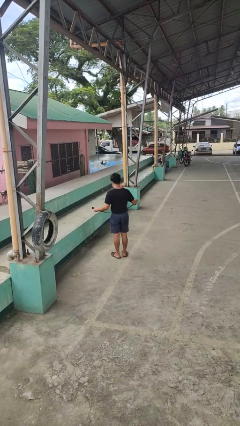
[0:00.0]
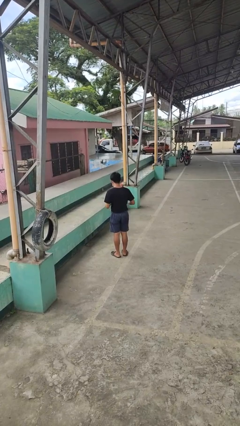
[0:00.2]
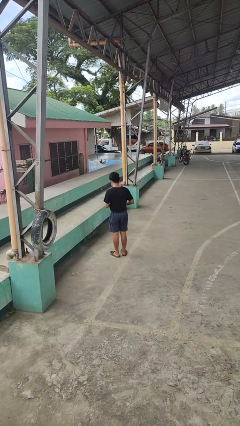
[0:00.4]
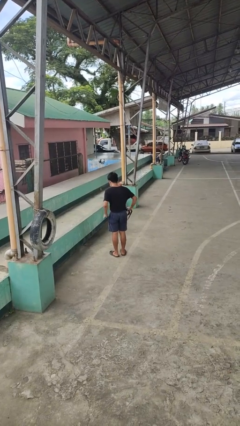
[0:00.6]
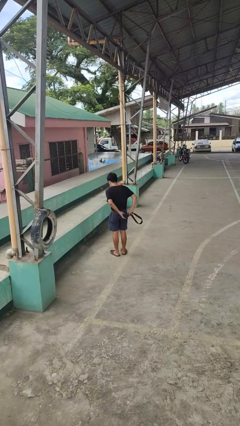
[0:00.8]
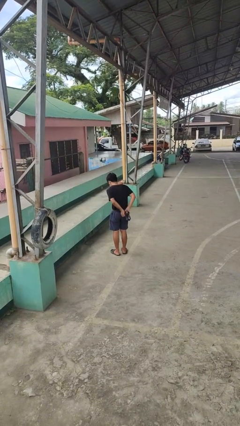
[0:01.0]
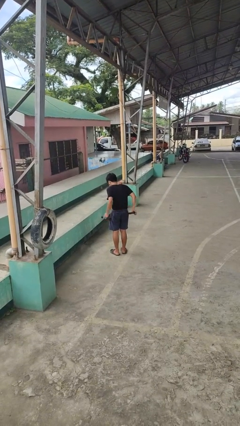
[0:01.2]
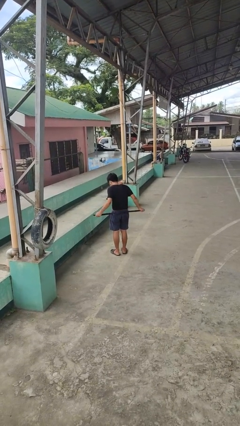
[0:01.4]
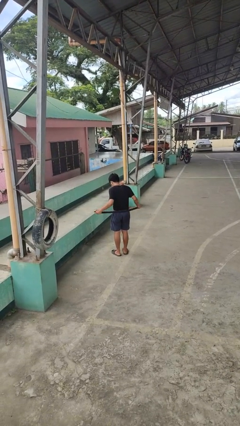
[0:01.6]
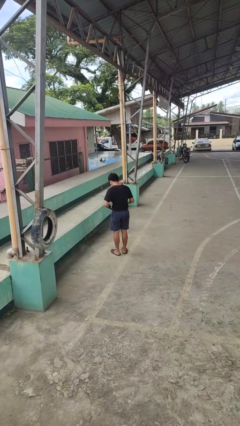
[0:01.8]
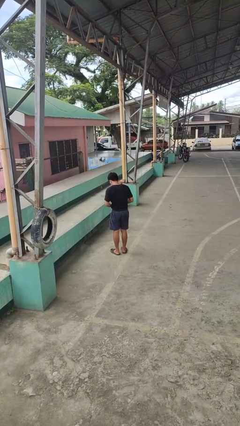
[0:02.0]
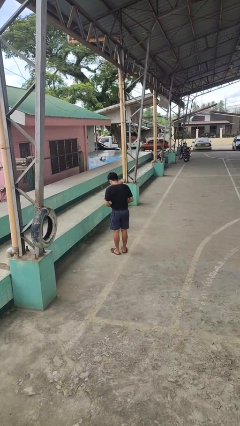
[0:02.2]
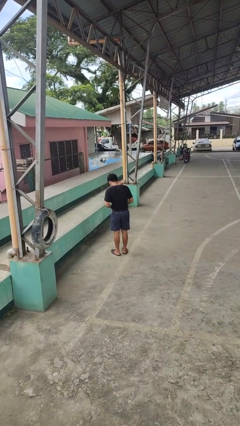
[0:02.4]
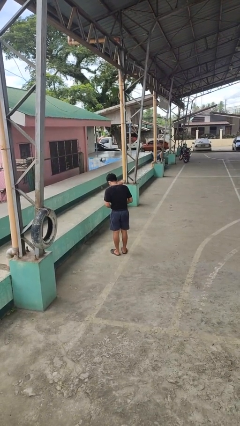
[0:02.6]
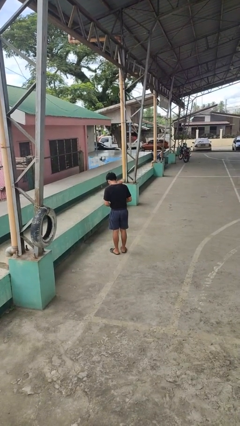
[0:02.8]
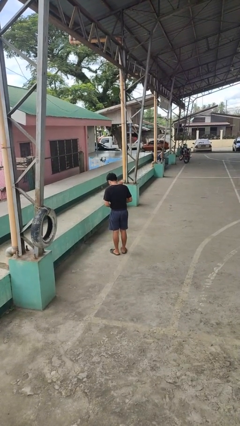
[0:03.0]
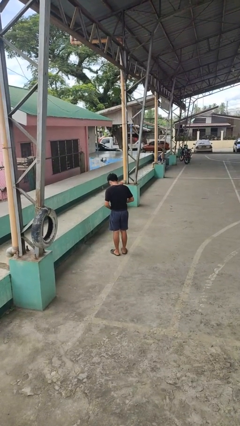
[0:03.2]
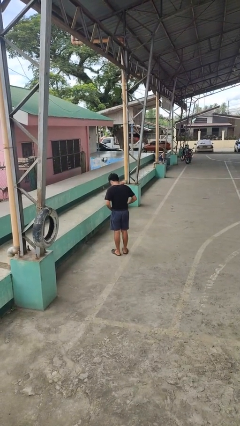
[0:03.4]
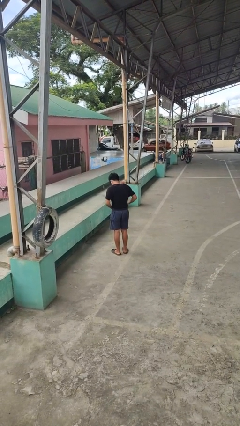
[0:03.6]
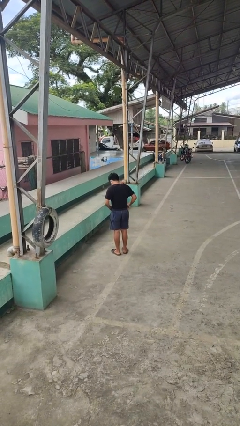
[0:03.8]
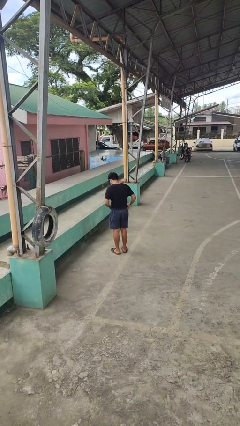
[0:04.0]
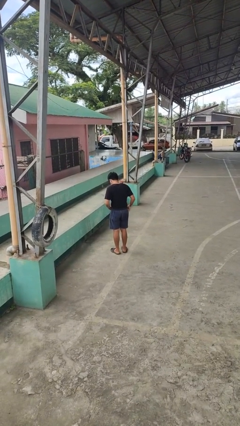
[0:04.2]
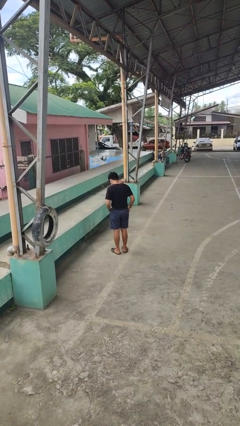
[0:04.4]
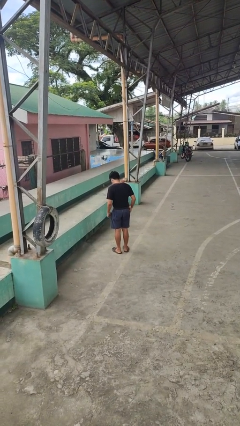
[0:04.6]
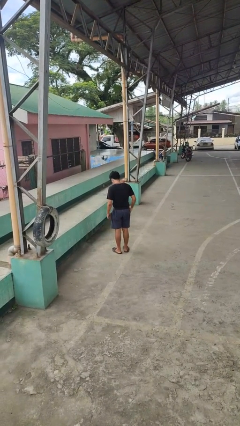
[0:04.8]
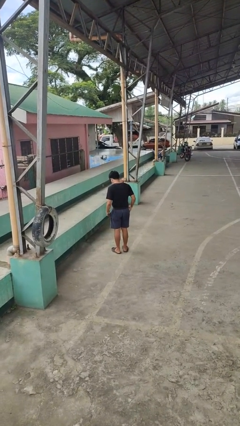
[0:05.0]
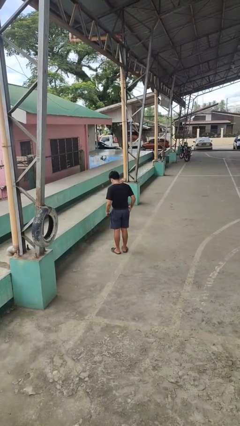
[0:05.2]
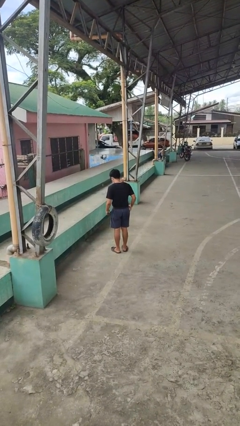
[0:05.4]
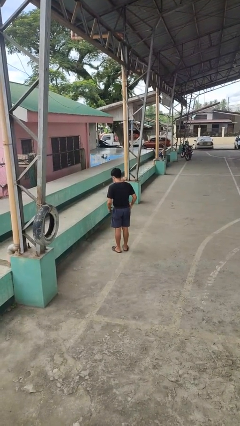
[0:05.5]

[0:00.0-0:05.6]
person puts on belt

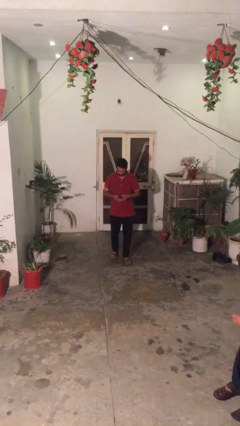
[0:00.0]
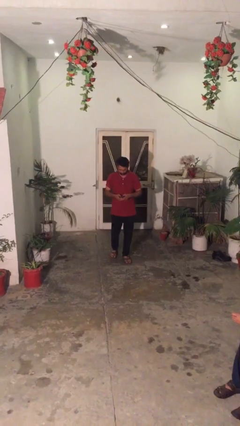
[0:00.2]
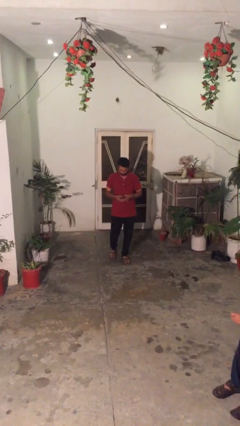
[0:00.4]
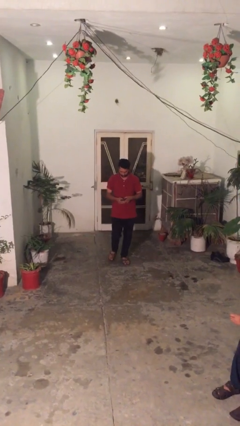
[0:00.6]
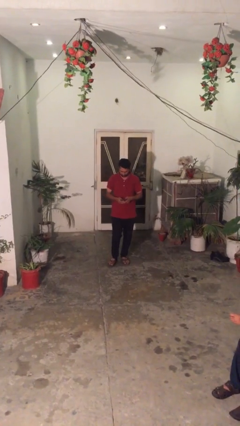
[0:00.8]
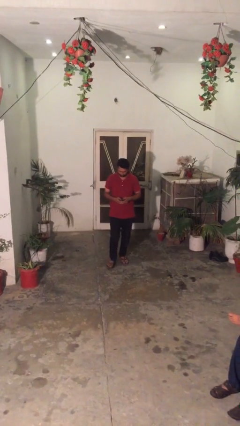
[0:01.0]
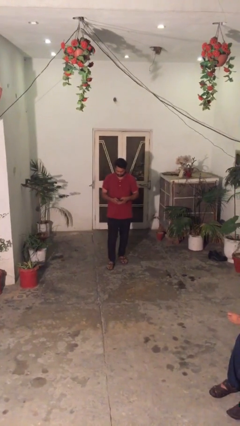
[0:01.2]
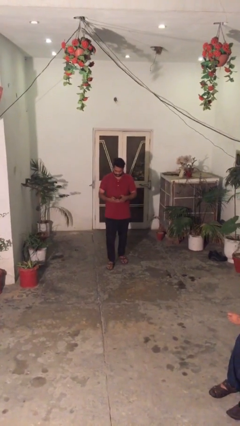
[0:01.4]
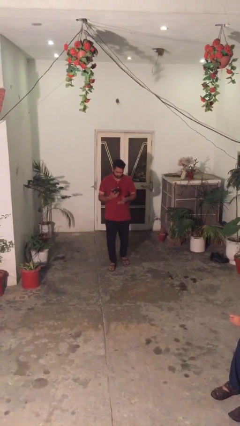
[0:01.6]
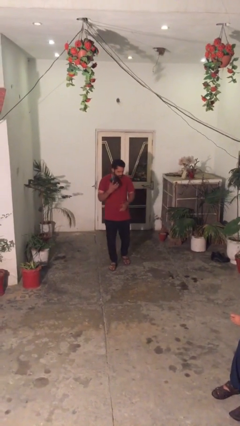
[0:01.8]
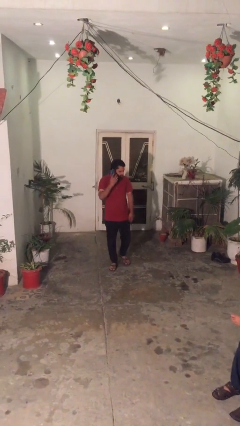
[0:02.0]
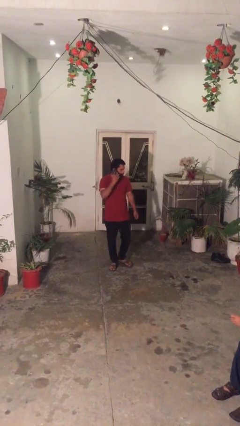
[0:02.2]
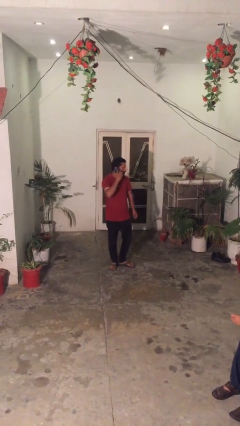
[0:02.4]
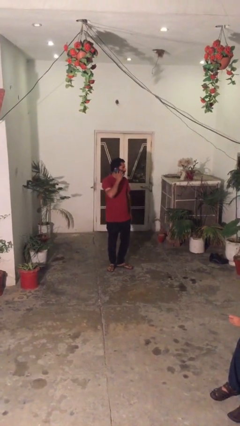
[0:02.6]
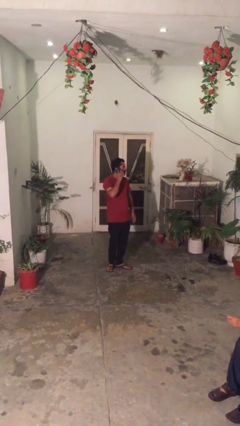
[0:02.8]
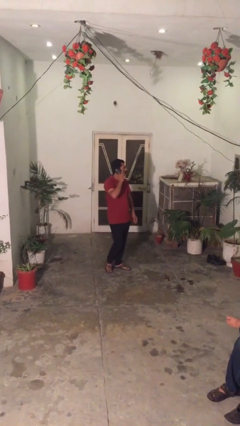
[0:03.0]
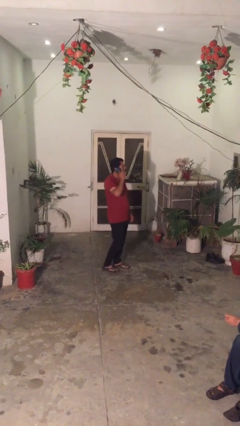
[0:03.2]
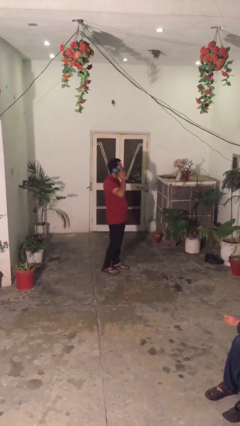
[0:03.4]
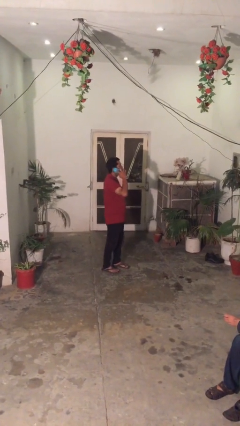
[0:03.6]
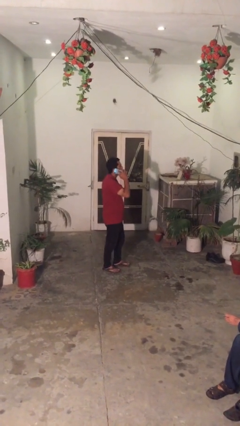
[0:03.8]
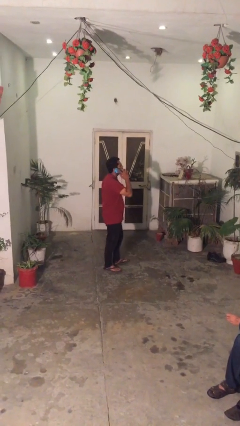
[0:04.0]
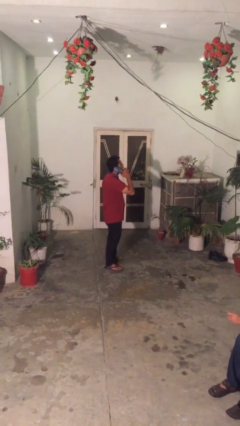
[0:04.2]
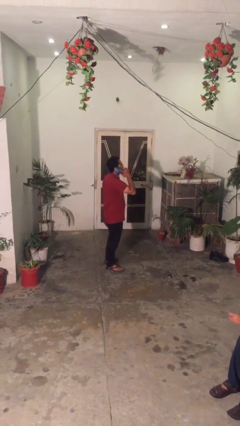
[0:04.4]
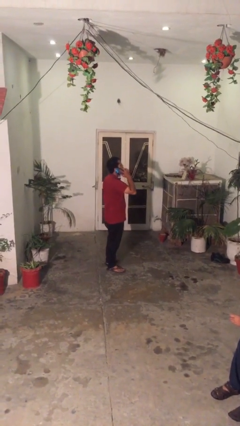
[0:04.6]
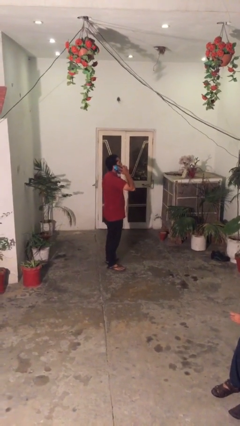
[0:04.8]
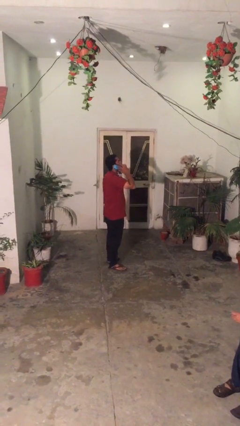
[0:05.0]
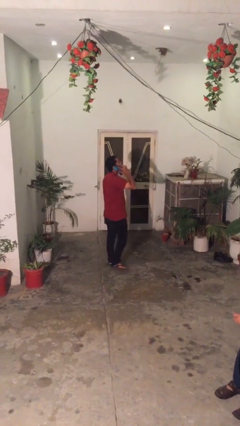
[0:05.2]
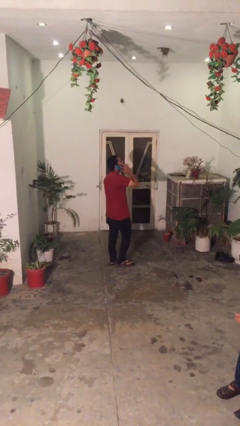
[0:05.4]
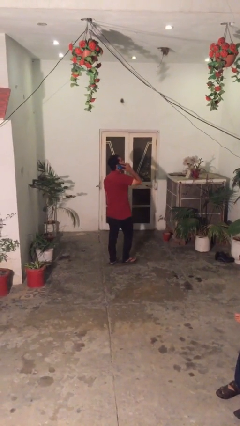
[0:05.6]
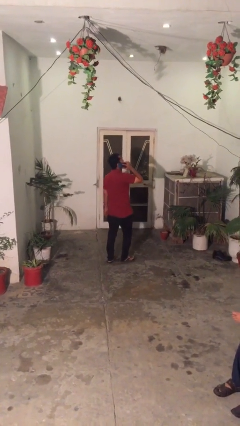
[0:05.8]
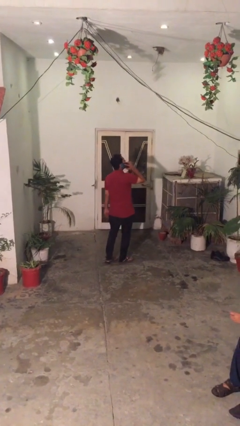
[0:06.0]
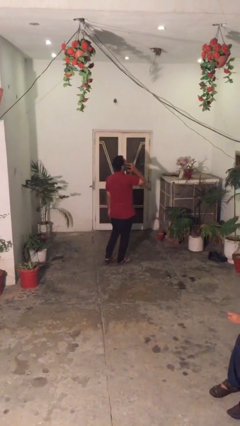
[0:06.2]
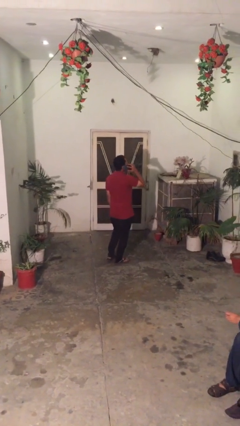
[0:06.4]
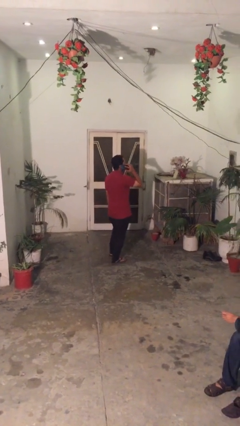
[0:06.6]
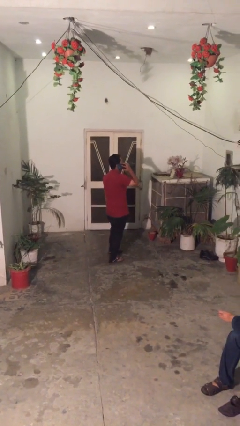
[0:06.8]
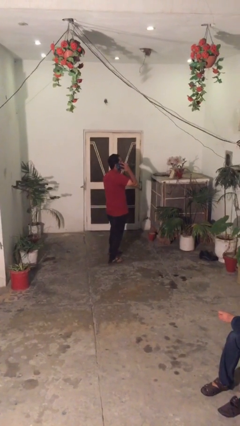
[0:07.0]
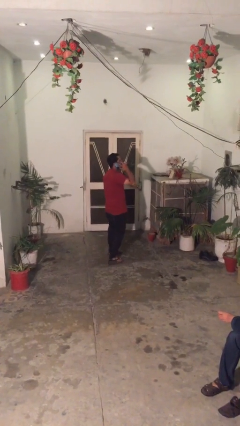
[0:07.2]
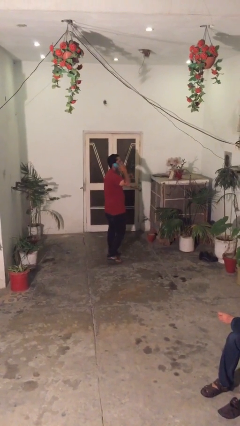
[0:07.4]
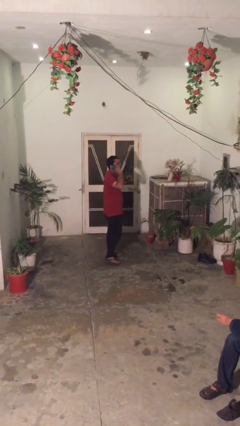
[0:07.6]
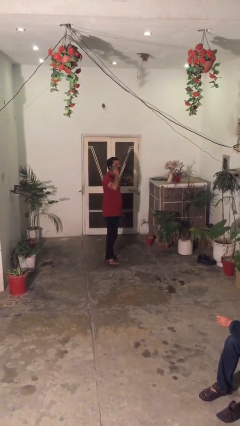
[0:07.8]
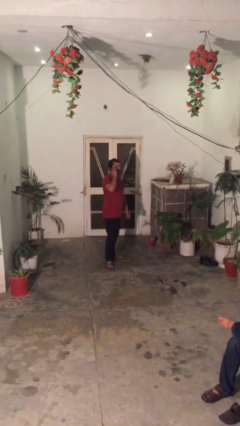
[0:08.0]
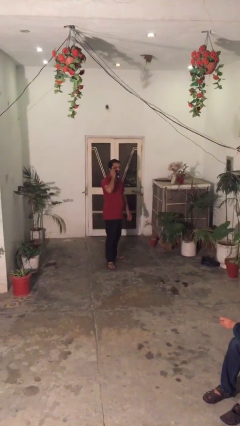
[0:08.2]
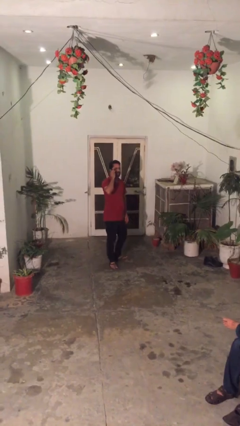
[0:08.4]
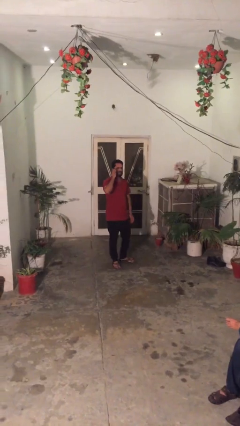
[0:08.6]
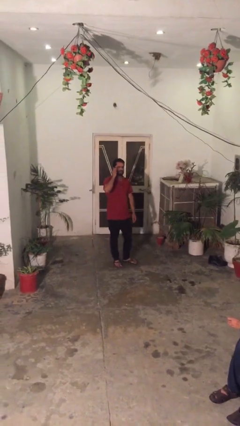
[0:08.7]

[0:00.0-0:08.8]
person talks on phone

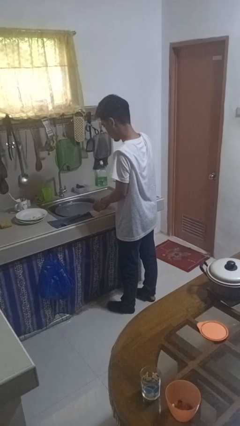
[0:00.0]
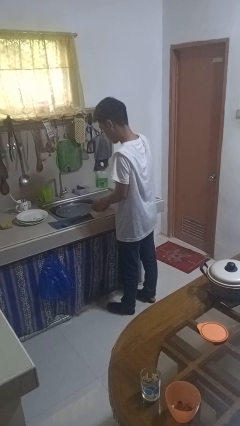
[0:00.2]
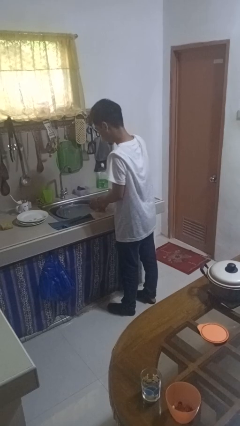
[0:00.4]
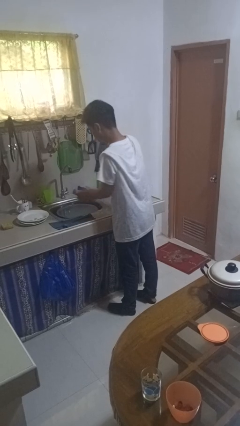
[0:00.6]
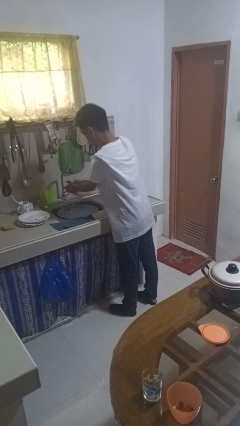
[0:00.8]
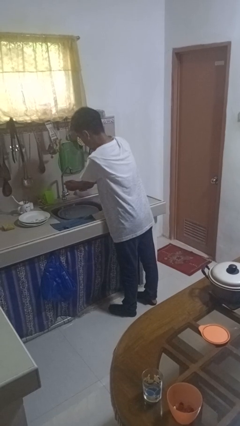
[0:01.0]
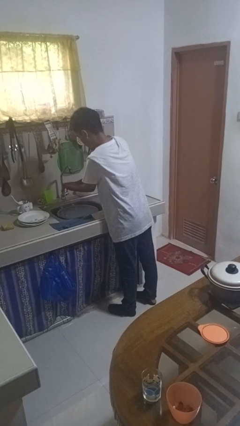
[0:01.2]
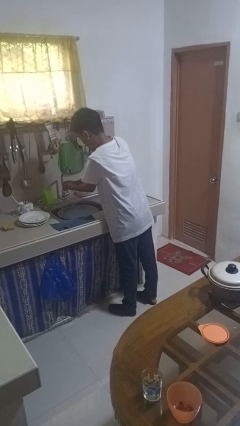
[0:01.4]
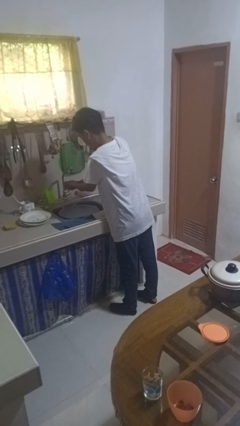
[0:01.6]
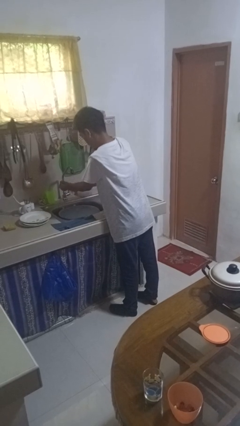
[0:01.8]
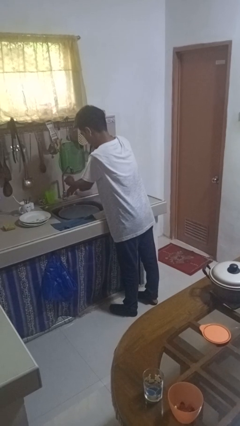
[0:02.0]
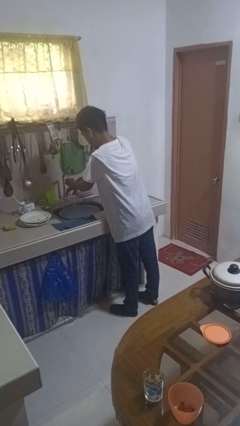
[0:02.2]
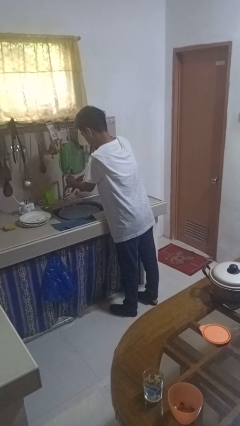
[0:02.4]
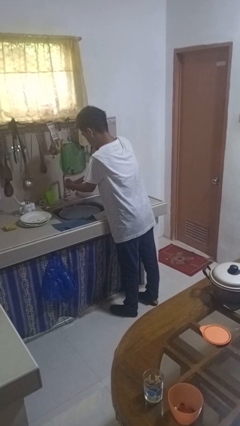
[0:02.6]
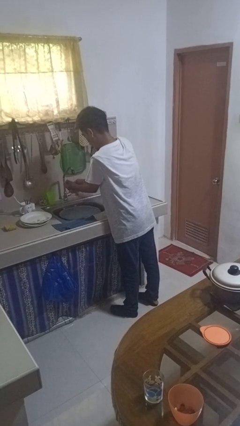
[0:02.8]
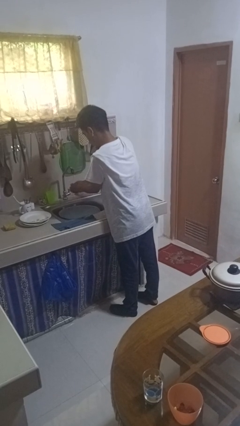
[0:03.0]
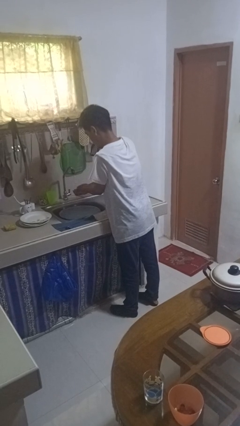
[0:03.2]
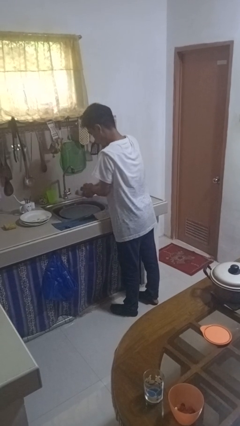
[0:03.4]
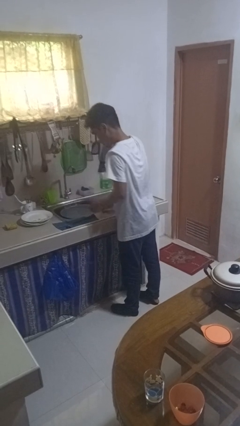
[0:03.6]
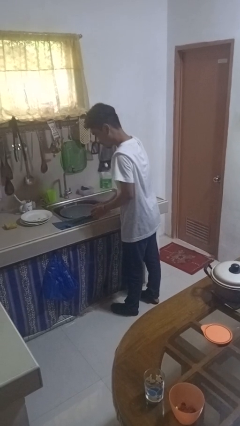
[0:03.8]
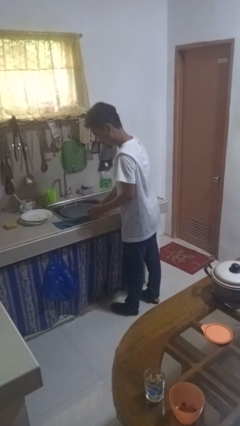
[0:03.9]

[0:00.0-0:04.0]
person washes hands
